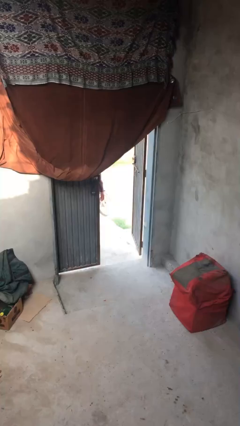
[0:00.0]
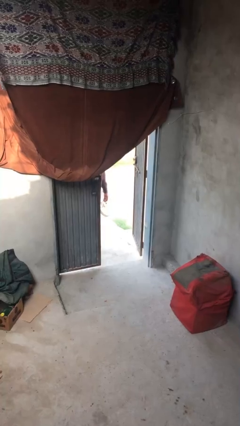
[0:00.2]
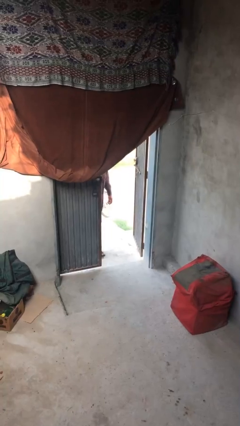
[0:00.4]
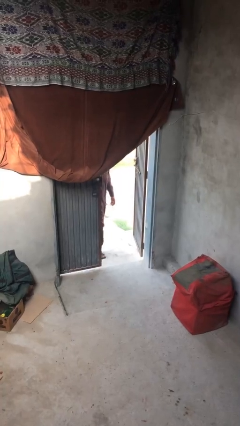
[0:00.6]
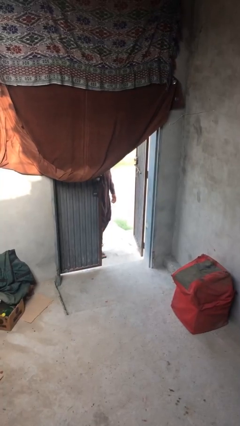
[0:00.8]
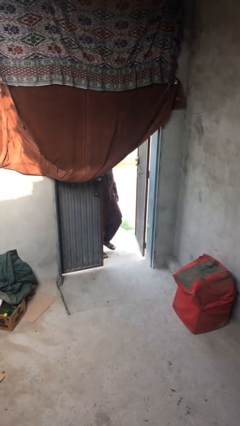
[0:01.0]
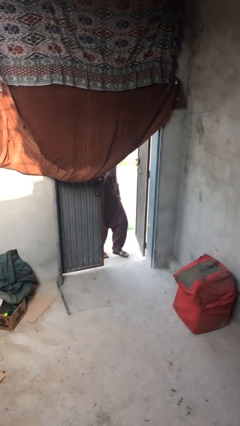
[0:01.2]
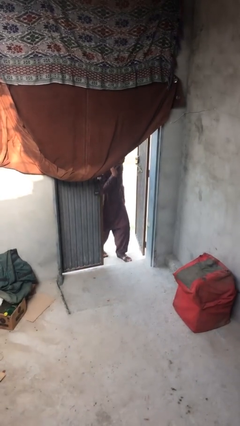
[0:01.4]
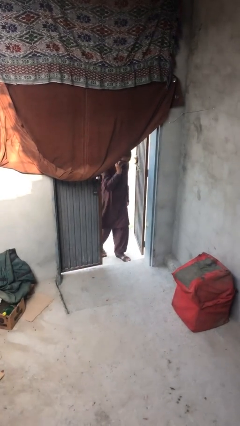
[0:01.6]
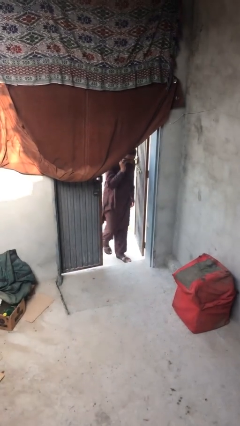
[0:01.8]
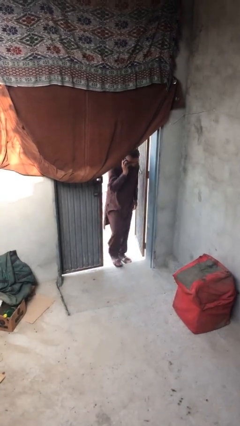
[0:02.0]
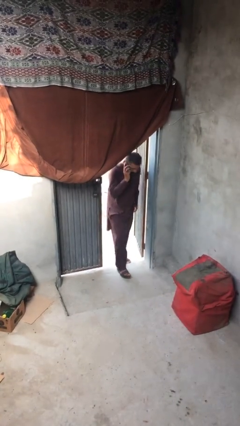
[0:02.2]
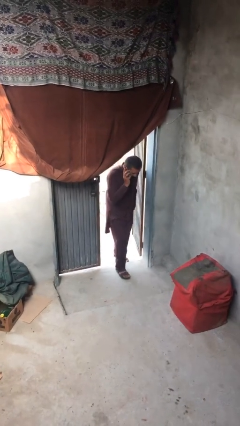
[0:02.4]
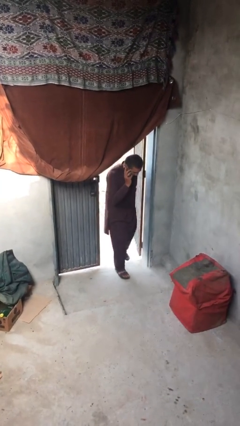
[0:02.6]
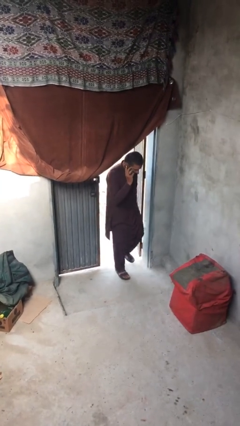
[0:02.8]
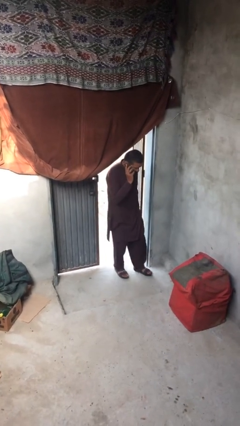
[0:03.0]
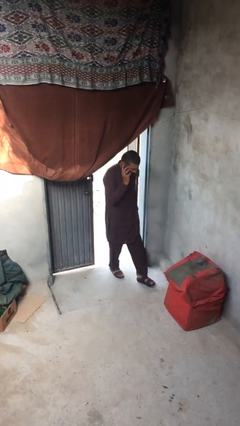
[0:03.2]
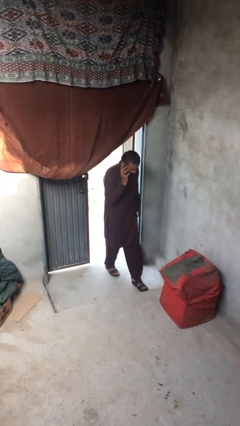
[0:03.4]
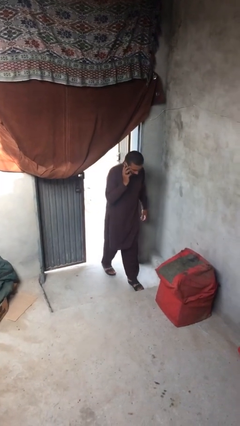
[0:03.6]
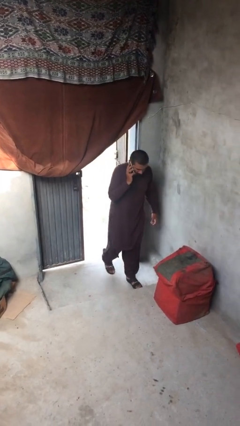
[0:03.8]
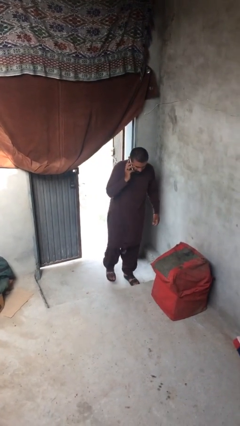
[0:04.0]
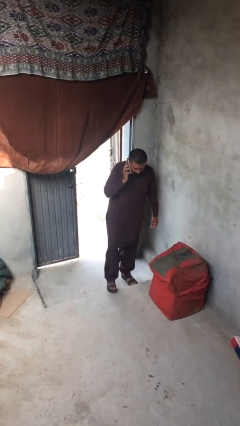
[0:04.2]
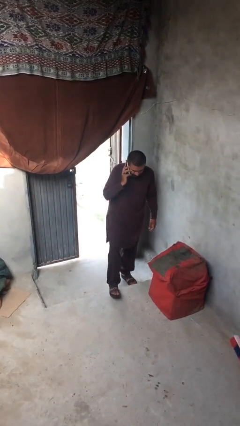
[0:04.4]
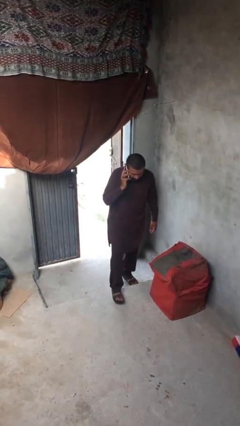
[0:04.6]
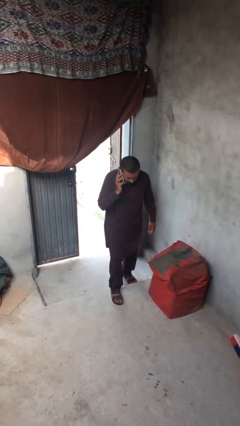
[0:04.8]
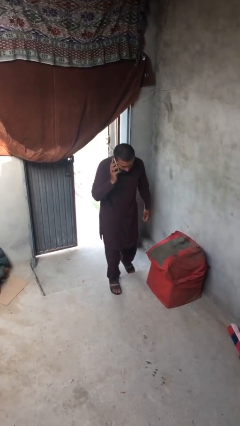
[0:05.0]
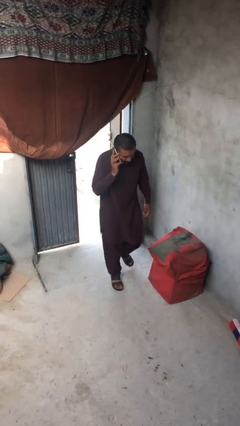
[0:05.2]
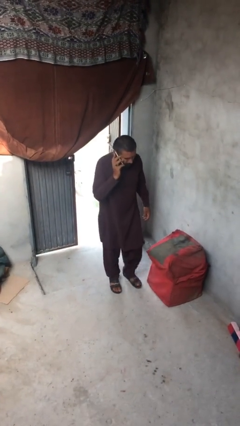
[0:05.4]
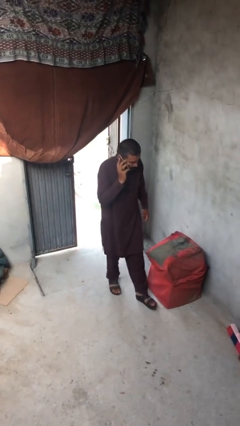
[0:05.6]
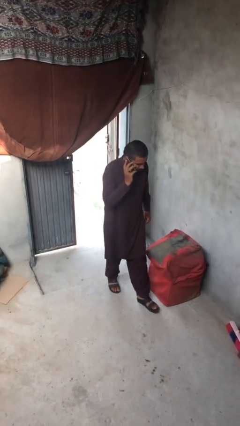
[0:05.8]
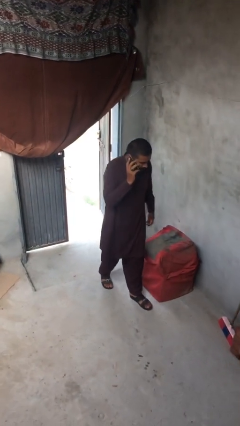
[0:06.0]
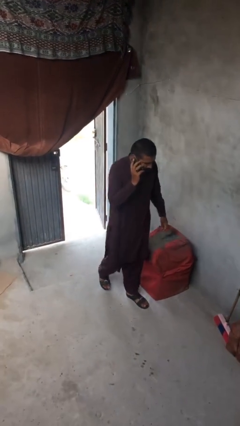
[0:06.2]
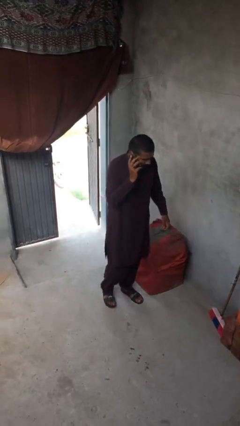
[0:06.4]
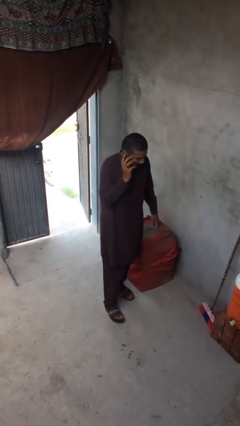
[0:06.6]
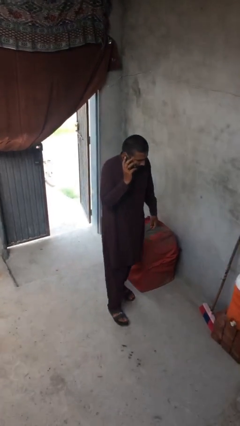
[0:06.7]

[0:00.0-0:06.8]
person enters scene through structure

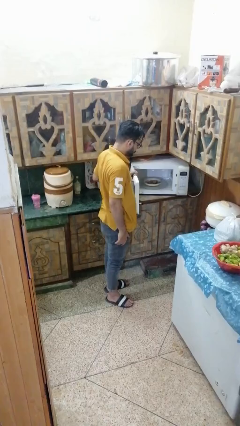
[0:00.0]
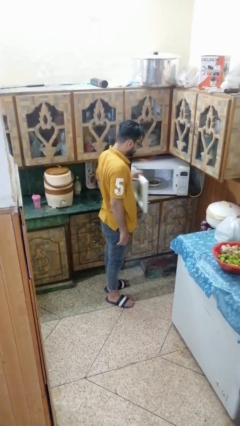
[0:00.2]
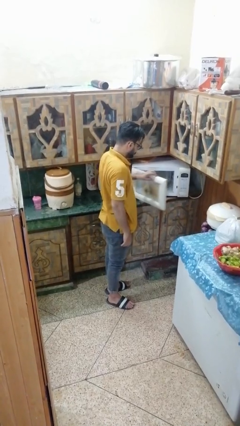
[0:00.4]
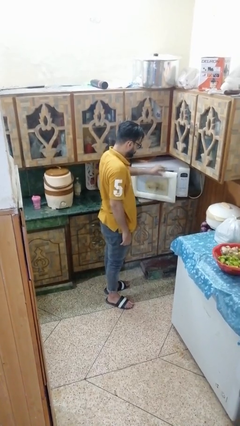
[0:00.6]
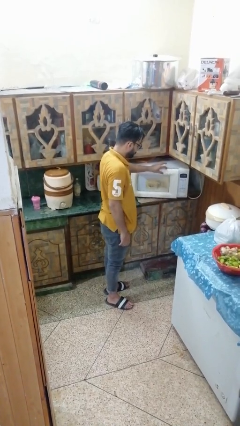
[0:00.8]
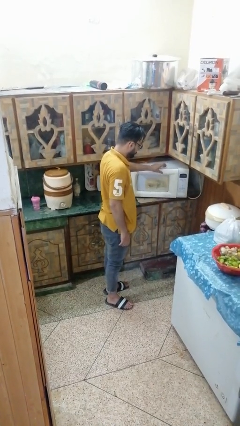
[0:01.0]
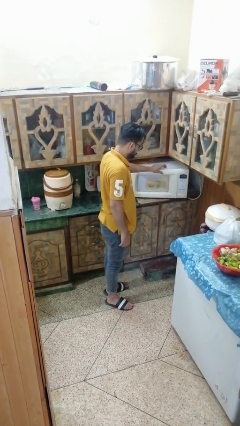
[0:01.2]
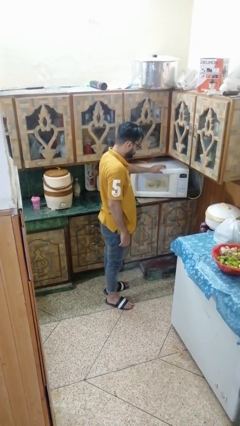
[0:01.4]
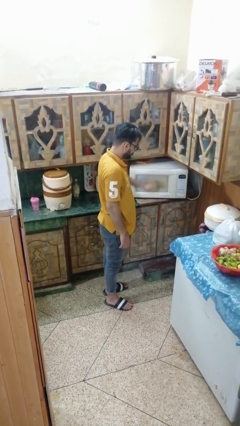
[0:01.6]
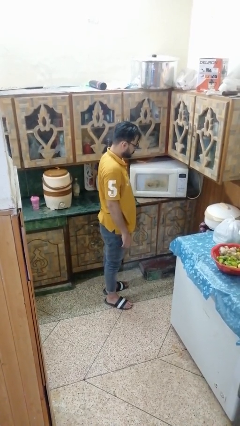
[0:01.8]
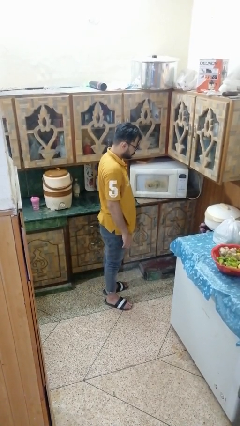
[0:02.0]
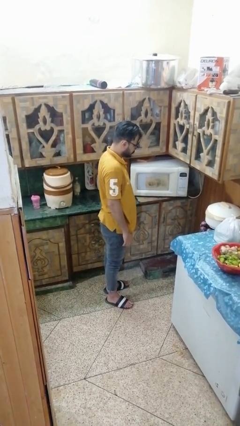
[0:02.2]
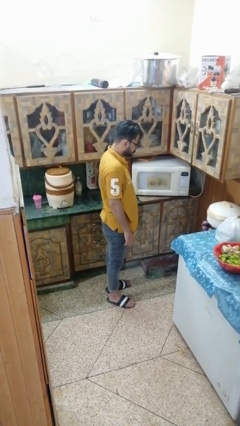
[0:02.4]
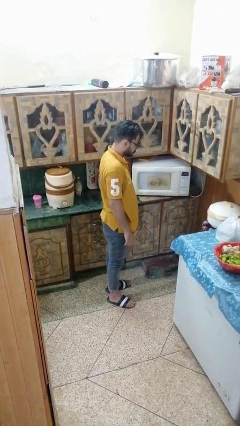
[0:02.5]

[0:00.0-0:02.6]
person closes microwave

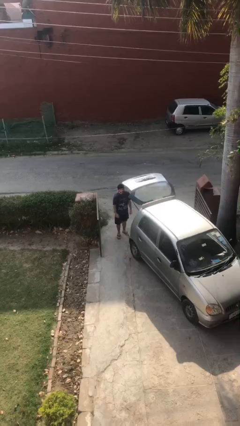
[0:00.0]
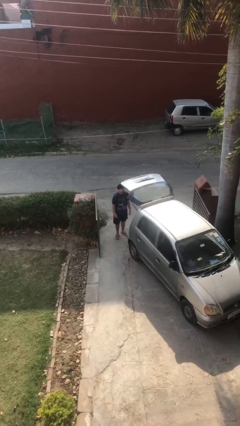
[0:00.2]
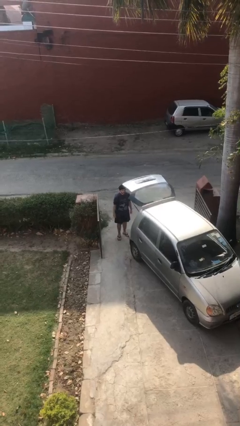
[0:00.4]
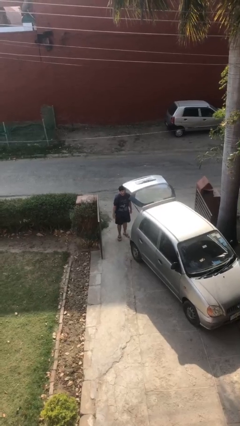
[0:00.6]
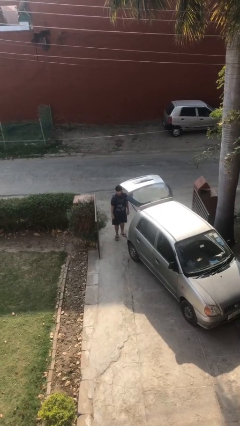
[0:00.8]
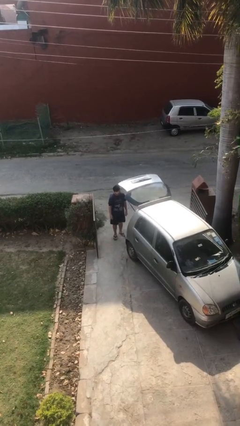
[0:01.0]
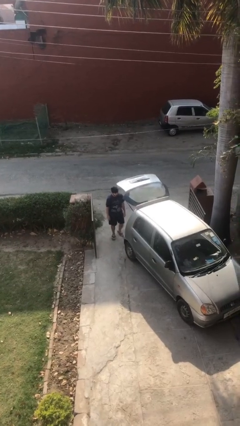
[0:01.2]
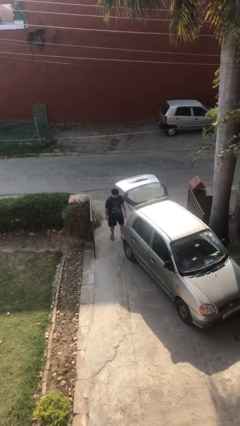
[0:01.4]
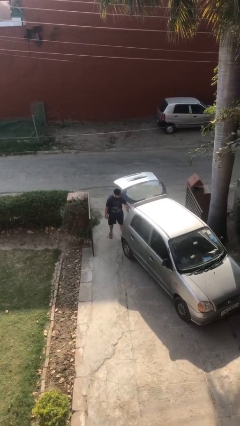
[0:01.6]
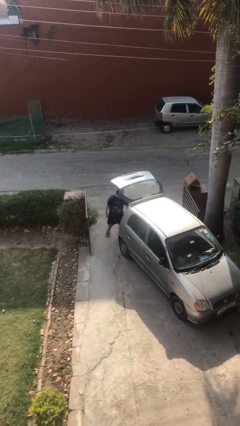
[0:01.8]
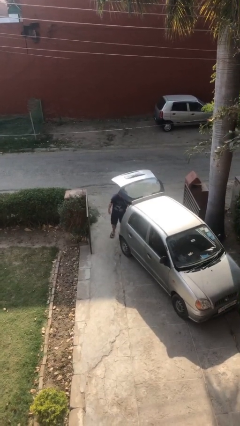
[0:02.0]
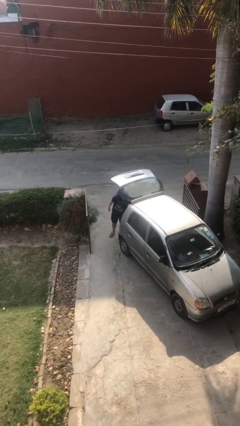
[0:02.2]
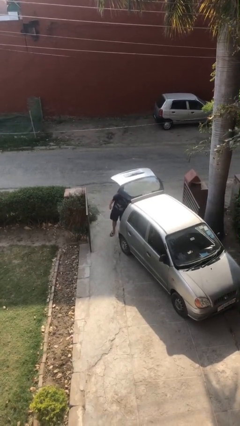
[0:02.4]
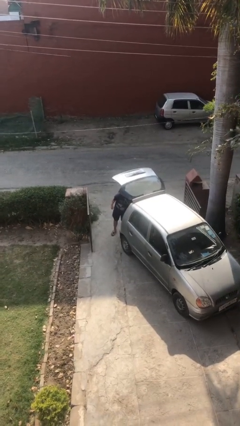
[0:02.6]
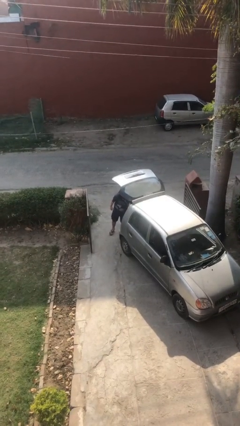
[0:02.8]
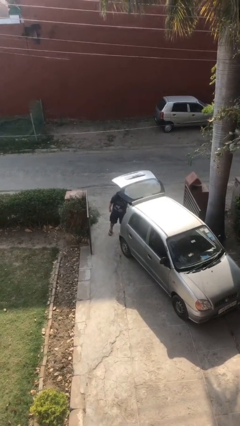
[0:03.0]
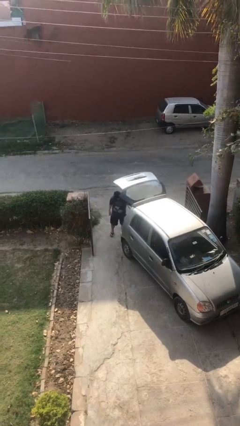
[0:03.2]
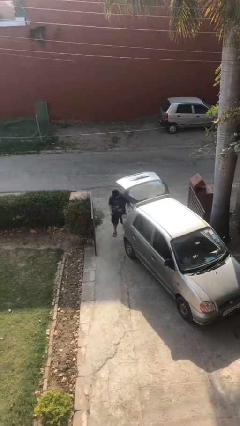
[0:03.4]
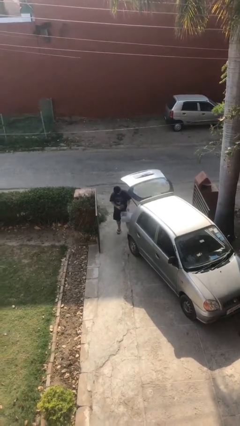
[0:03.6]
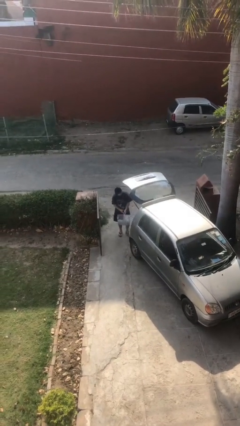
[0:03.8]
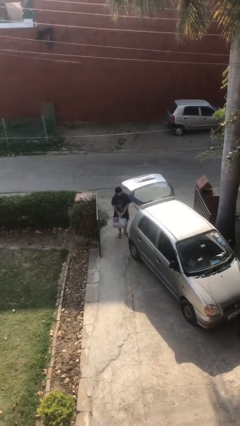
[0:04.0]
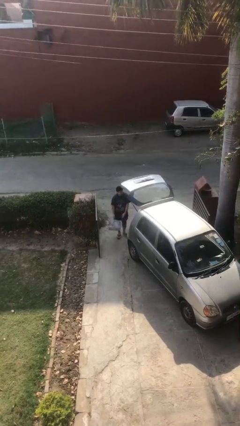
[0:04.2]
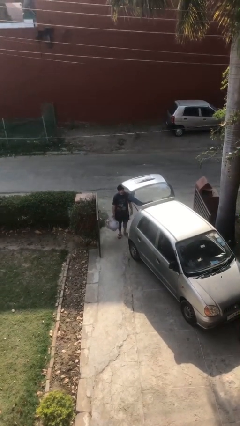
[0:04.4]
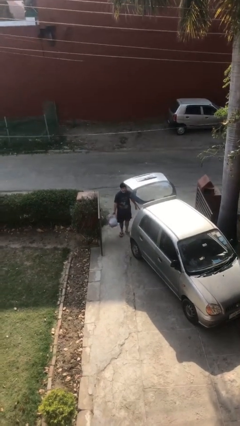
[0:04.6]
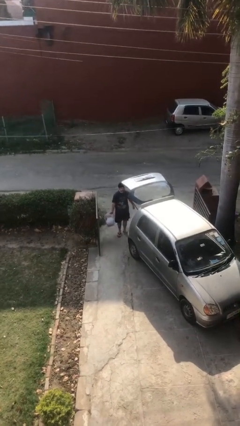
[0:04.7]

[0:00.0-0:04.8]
person unloads car

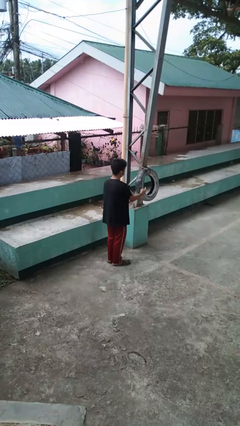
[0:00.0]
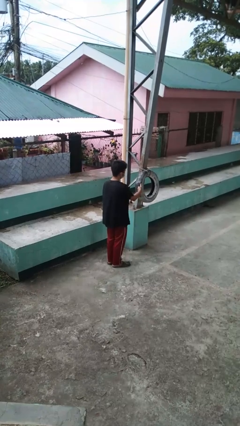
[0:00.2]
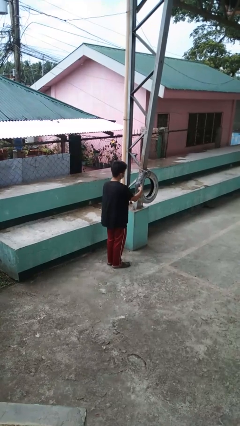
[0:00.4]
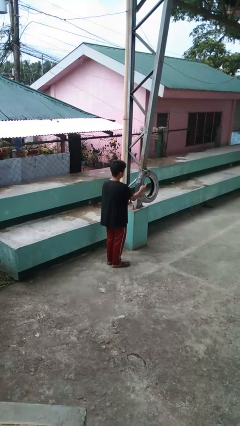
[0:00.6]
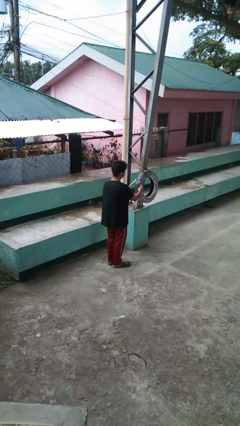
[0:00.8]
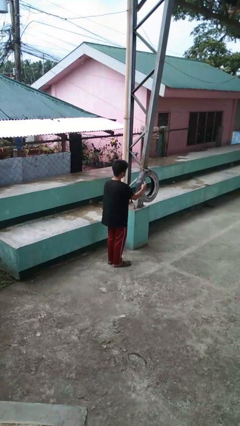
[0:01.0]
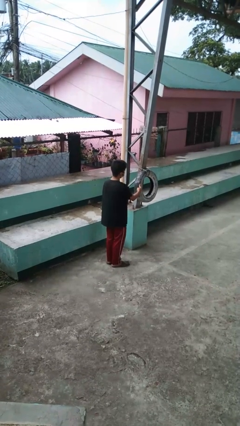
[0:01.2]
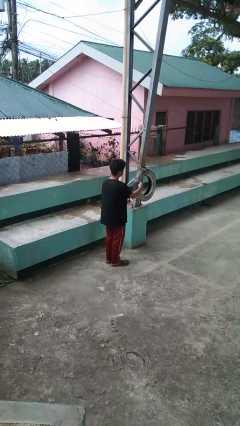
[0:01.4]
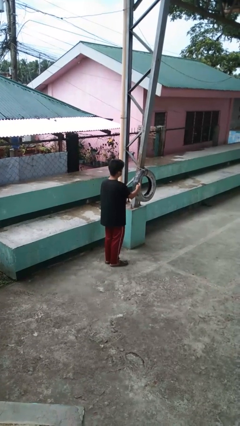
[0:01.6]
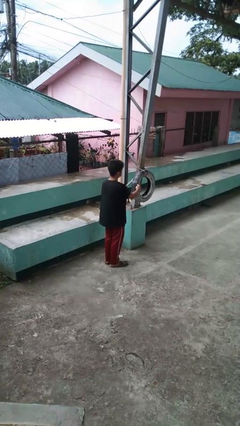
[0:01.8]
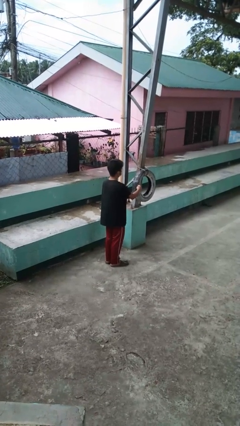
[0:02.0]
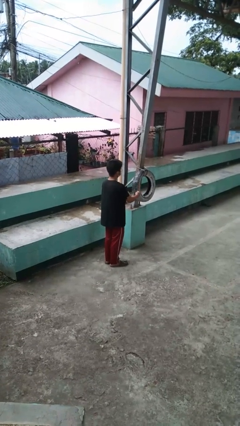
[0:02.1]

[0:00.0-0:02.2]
person taps object with finger

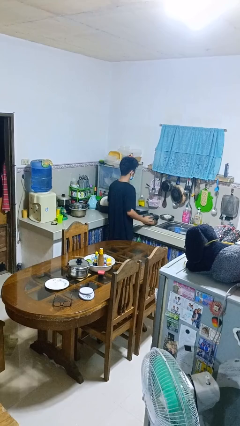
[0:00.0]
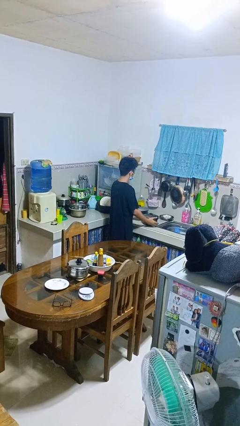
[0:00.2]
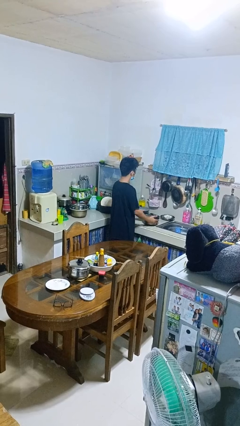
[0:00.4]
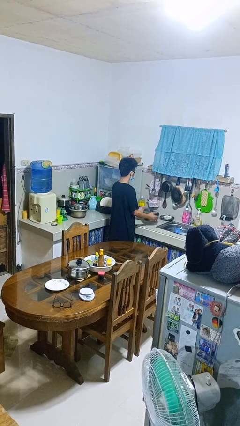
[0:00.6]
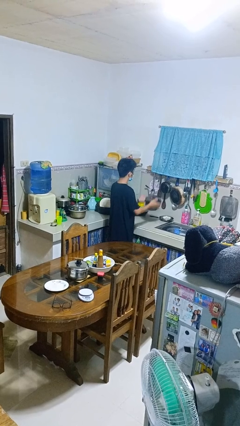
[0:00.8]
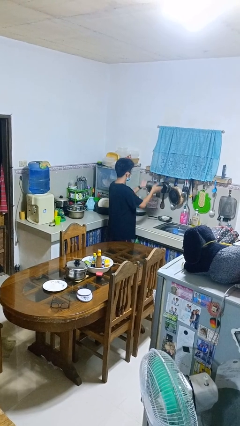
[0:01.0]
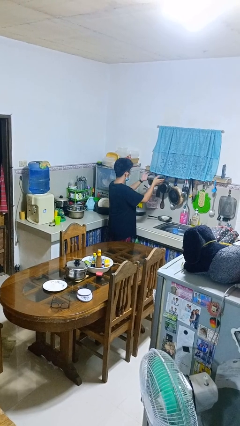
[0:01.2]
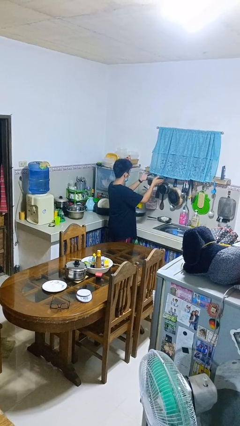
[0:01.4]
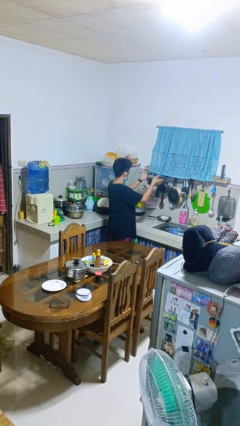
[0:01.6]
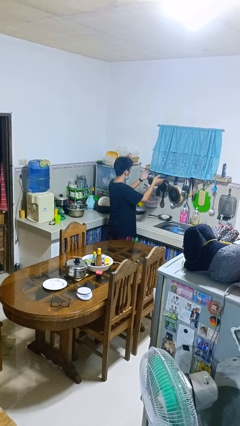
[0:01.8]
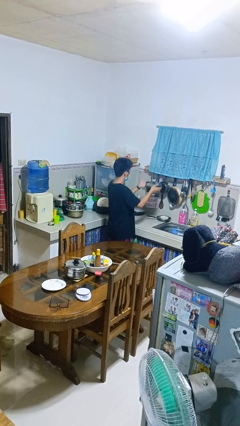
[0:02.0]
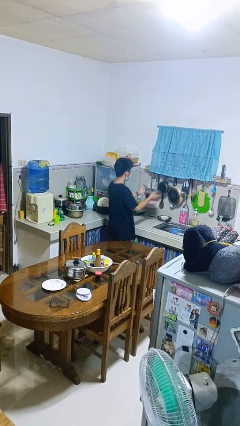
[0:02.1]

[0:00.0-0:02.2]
person picks up object from countertop
